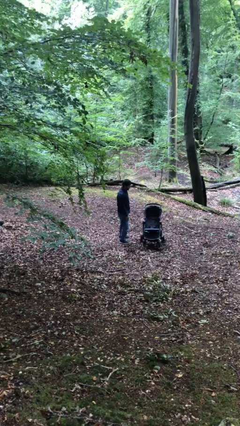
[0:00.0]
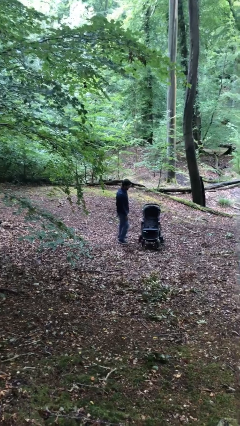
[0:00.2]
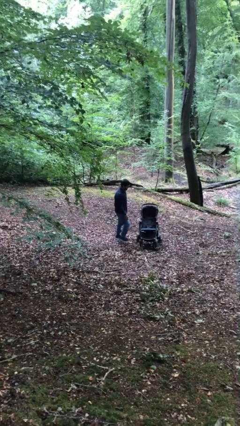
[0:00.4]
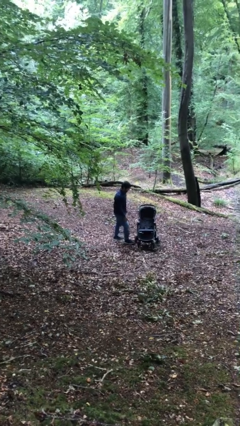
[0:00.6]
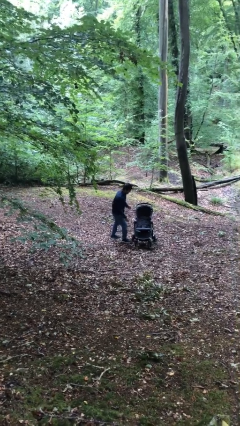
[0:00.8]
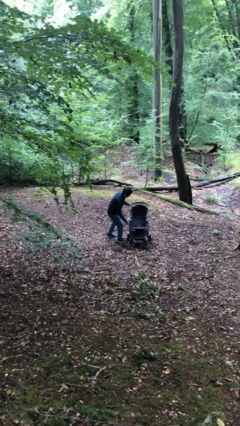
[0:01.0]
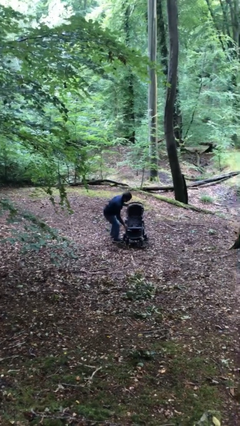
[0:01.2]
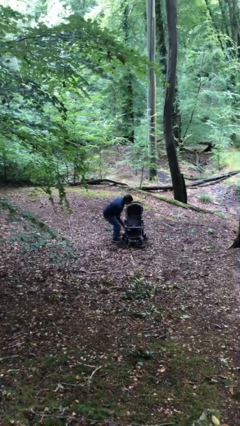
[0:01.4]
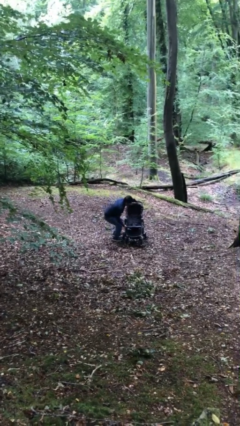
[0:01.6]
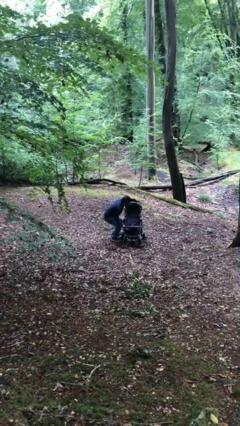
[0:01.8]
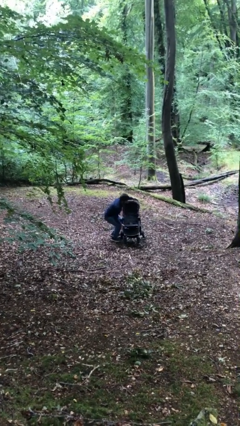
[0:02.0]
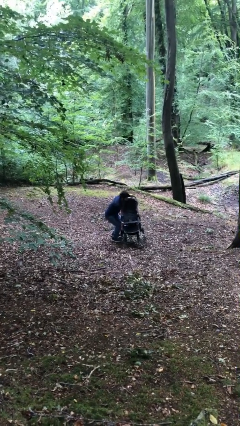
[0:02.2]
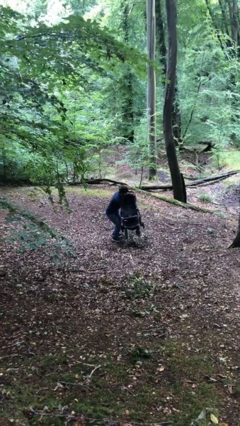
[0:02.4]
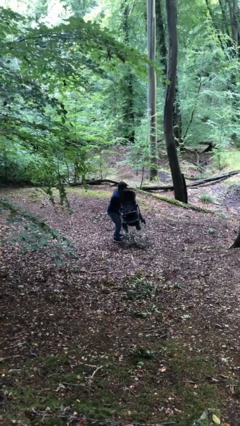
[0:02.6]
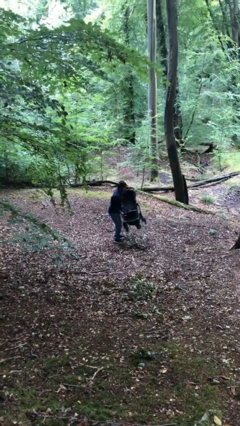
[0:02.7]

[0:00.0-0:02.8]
person picks up object from floor

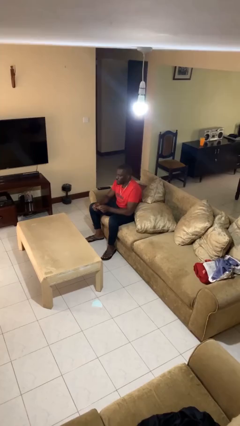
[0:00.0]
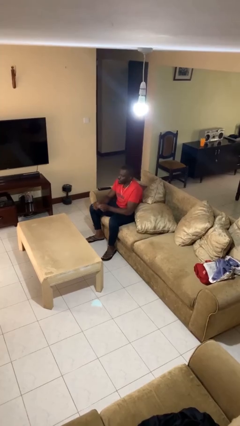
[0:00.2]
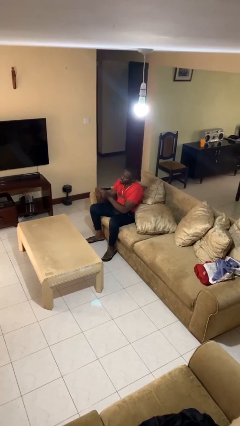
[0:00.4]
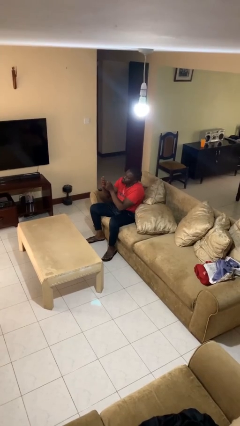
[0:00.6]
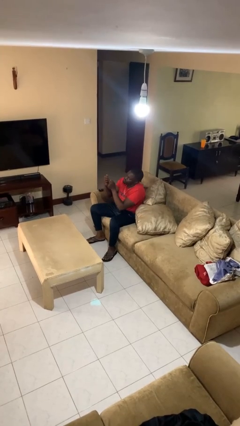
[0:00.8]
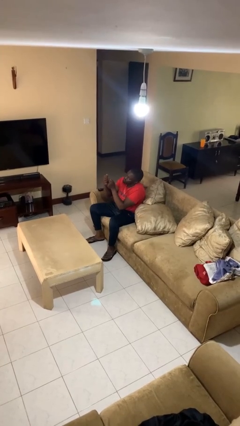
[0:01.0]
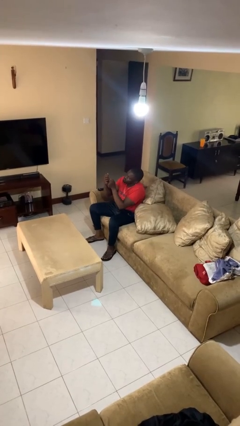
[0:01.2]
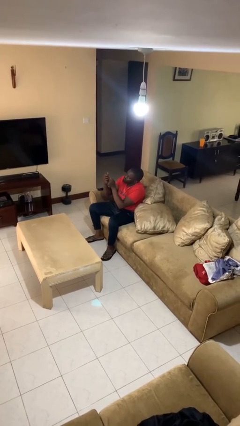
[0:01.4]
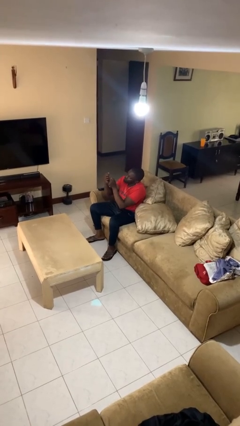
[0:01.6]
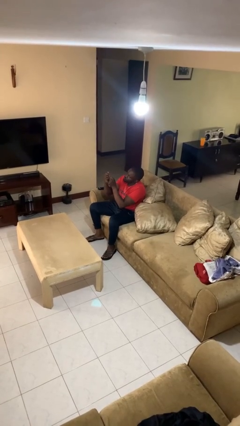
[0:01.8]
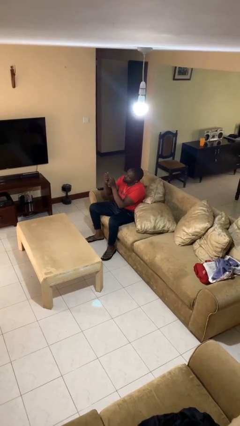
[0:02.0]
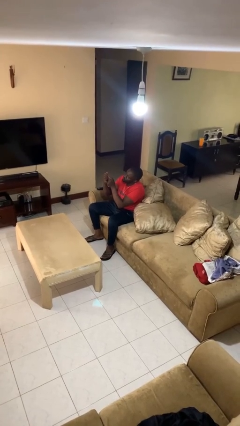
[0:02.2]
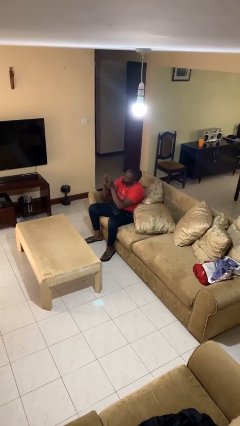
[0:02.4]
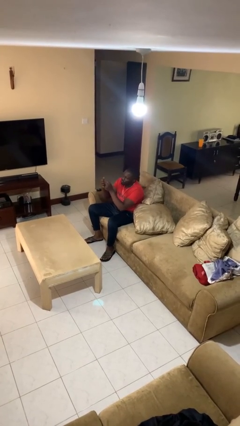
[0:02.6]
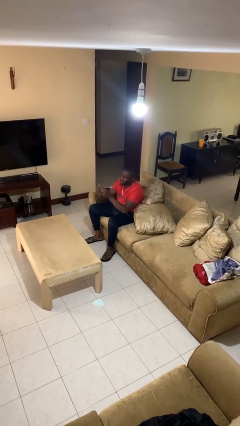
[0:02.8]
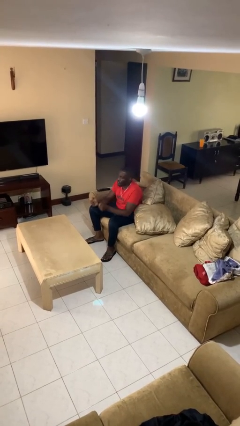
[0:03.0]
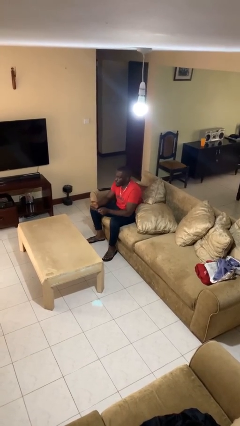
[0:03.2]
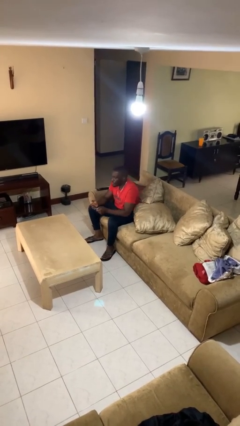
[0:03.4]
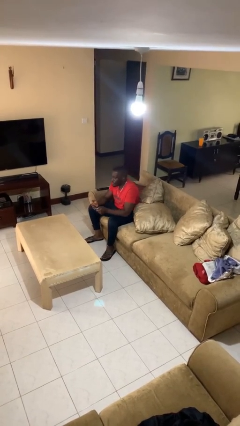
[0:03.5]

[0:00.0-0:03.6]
person clips fingernails

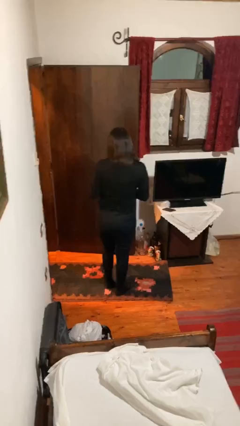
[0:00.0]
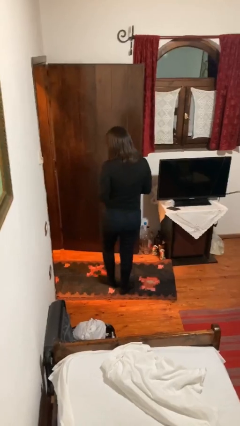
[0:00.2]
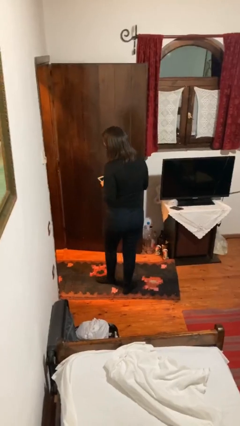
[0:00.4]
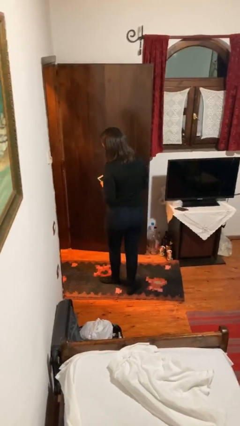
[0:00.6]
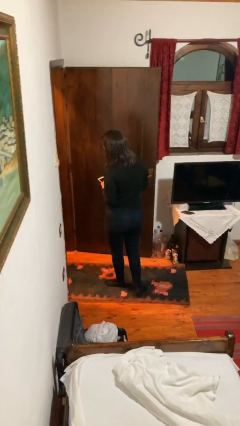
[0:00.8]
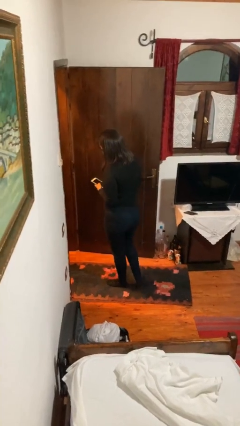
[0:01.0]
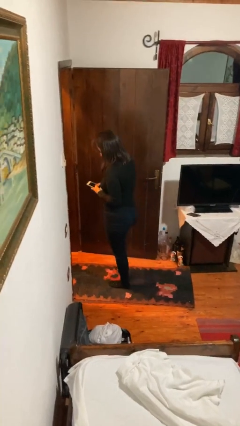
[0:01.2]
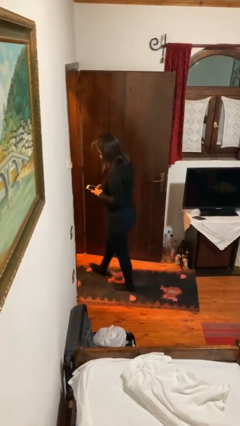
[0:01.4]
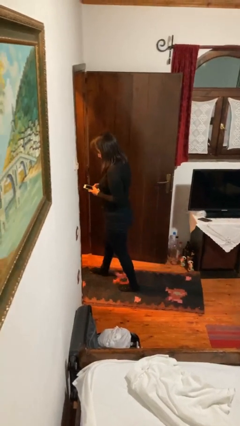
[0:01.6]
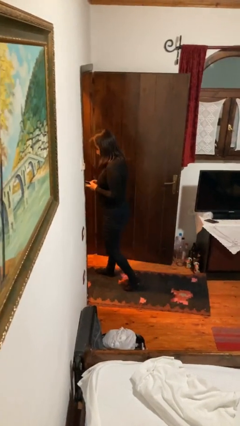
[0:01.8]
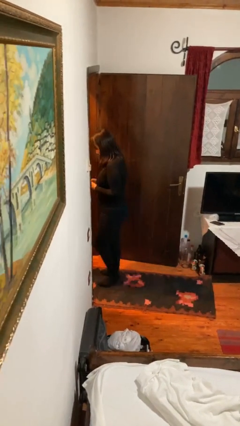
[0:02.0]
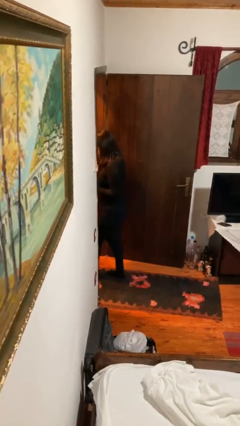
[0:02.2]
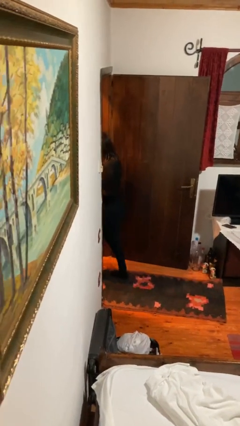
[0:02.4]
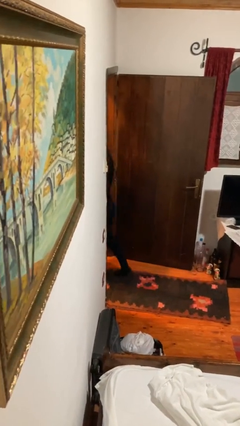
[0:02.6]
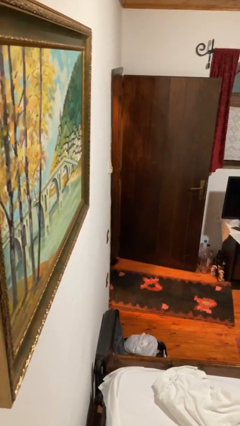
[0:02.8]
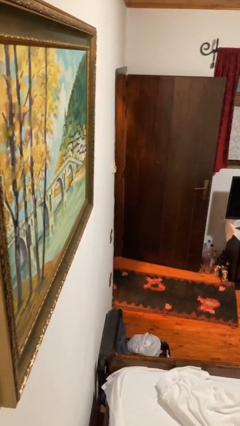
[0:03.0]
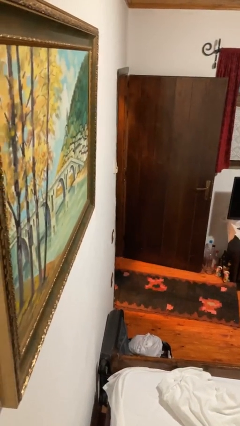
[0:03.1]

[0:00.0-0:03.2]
person exits scene through structure

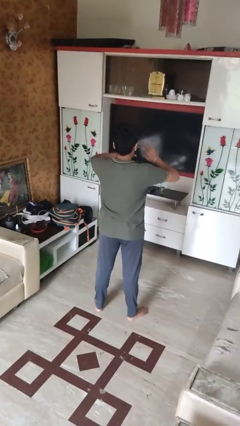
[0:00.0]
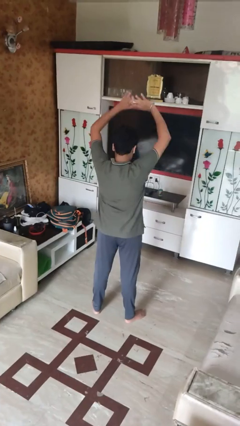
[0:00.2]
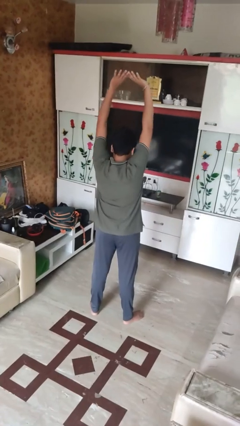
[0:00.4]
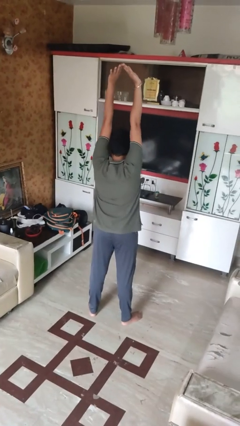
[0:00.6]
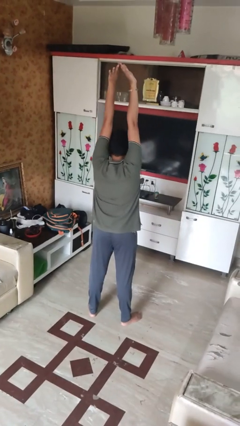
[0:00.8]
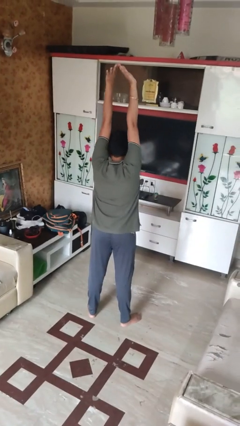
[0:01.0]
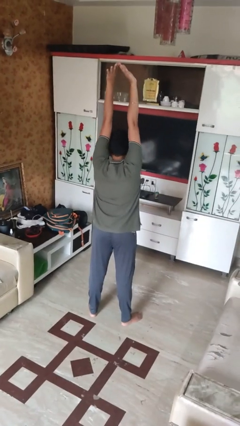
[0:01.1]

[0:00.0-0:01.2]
person stretches arms over head

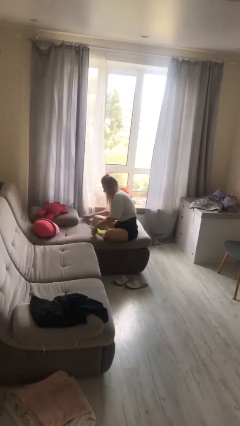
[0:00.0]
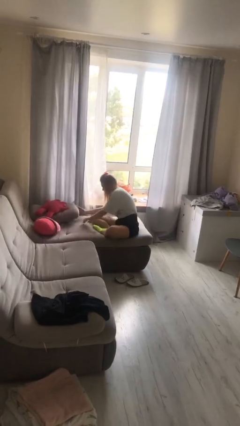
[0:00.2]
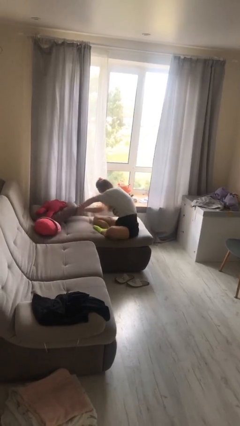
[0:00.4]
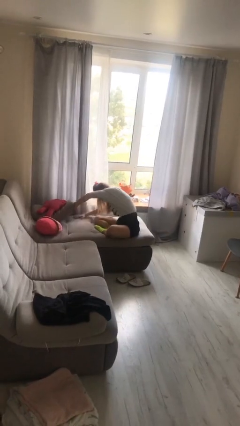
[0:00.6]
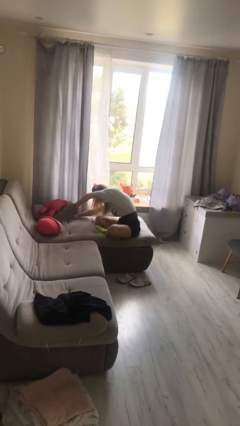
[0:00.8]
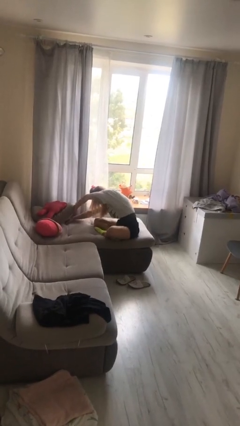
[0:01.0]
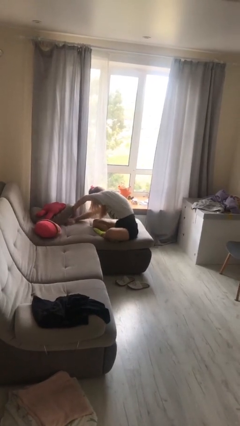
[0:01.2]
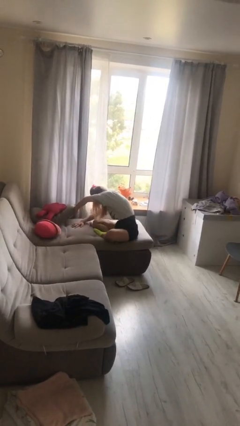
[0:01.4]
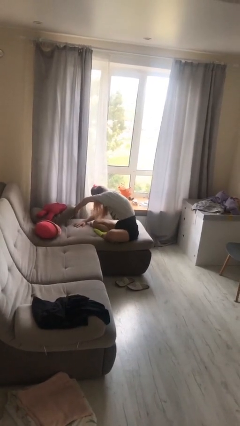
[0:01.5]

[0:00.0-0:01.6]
person searches in couch

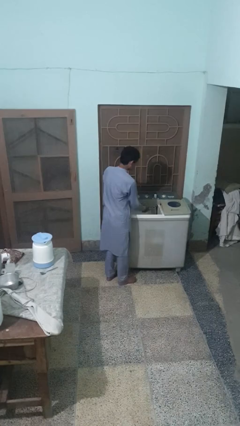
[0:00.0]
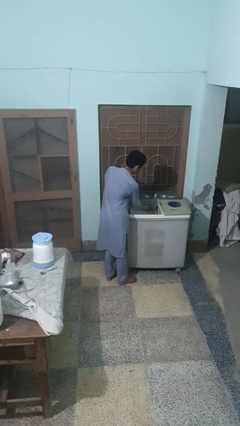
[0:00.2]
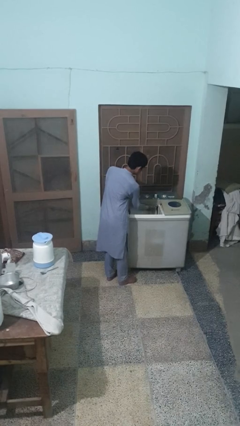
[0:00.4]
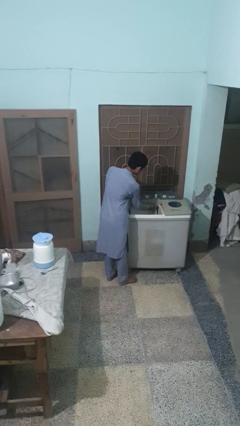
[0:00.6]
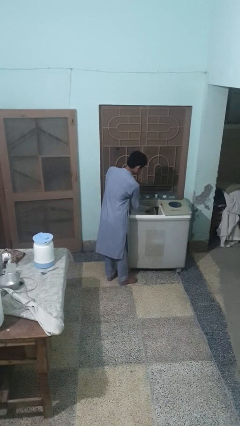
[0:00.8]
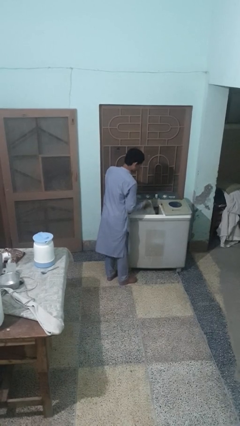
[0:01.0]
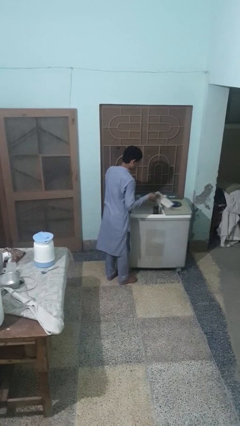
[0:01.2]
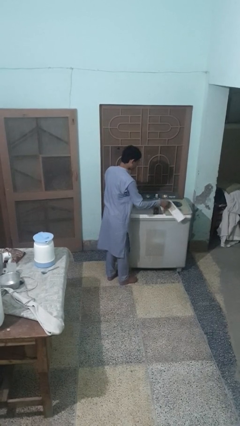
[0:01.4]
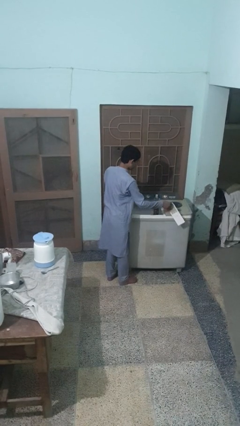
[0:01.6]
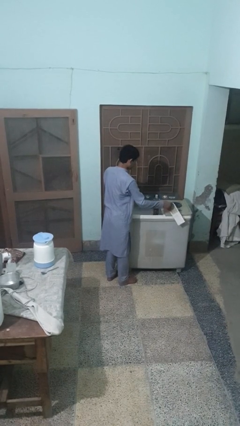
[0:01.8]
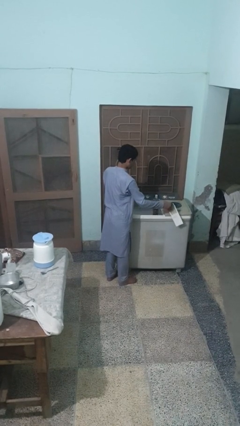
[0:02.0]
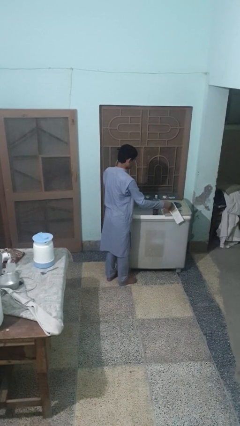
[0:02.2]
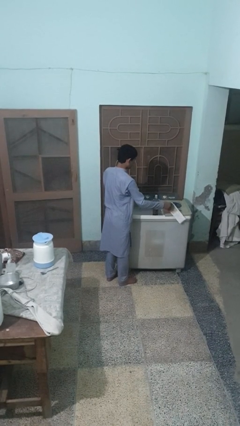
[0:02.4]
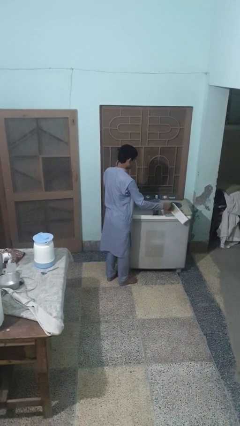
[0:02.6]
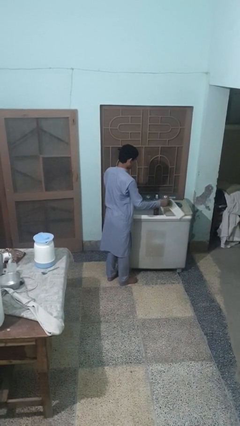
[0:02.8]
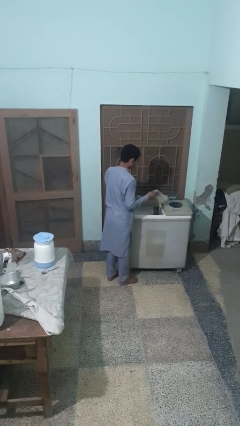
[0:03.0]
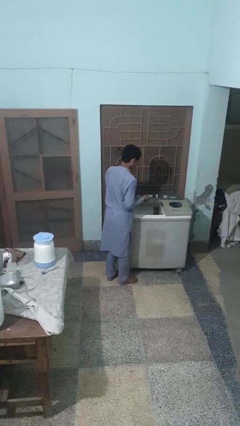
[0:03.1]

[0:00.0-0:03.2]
person cleans dryer lint trap

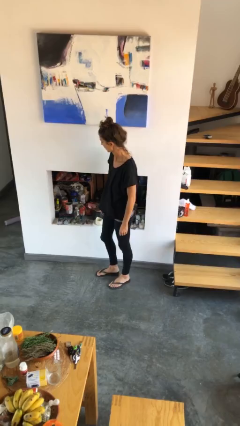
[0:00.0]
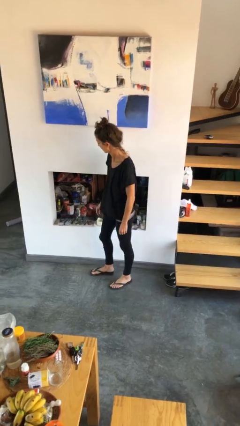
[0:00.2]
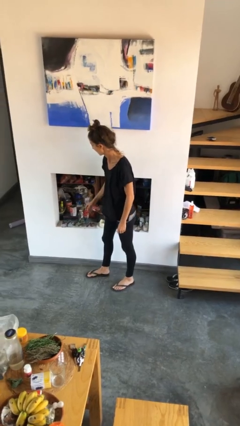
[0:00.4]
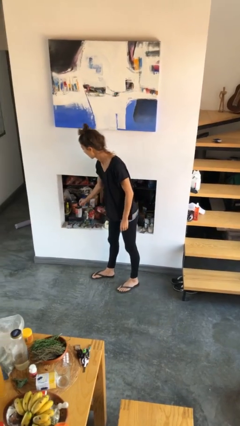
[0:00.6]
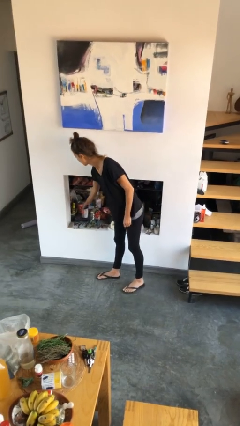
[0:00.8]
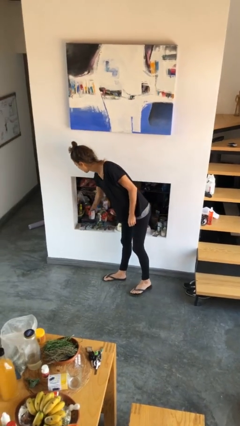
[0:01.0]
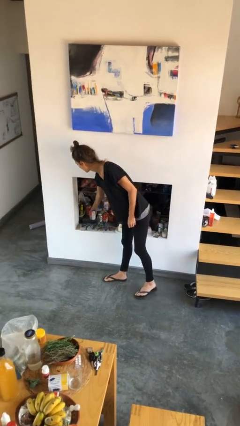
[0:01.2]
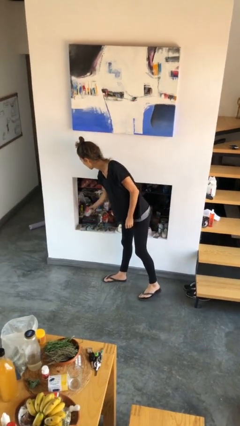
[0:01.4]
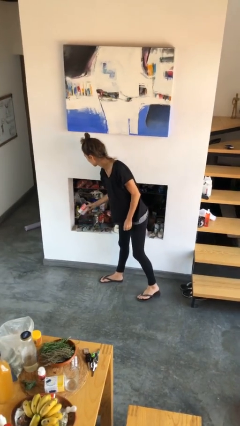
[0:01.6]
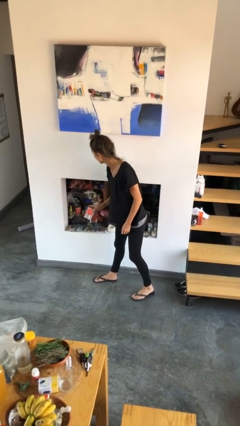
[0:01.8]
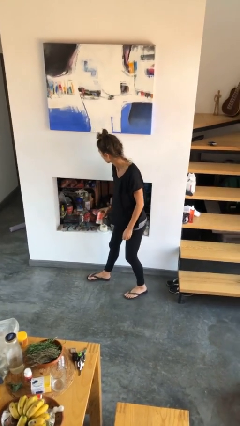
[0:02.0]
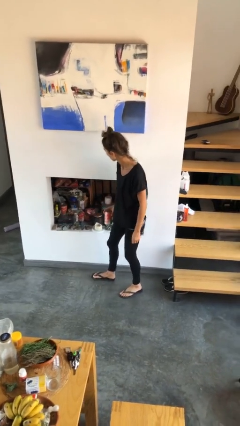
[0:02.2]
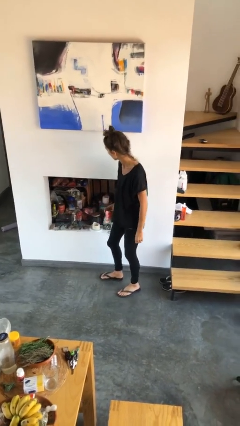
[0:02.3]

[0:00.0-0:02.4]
person picks up object from cabinet
